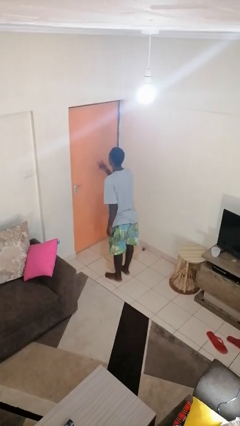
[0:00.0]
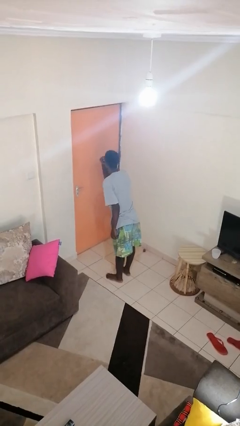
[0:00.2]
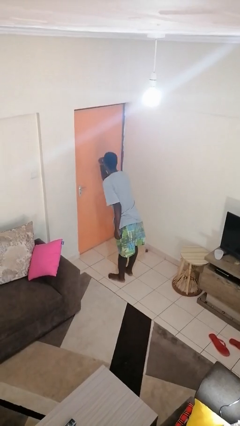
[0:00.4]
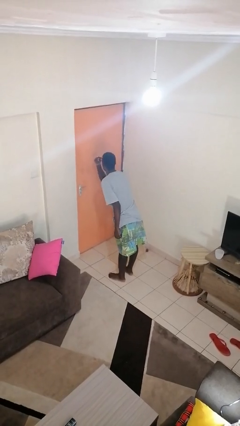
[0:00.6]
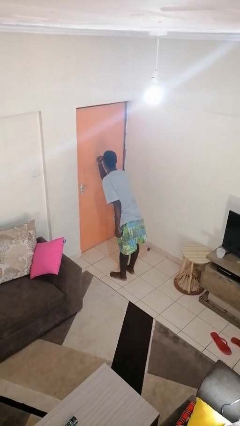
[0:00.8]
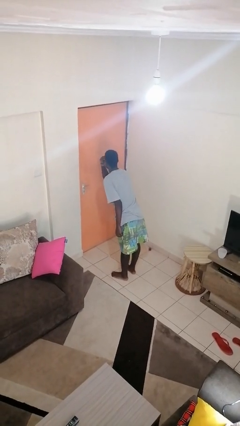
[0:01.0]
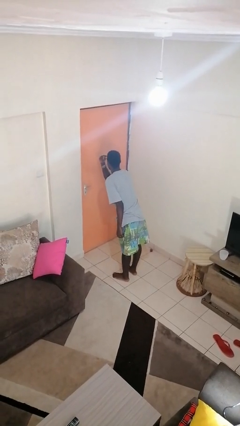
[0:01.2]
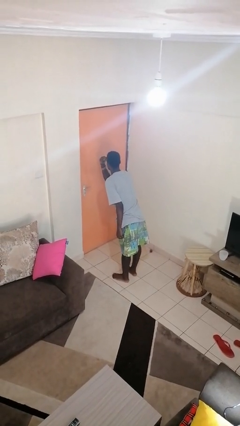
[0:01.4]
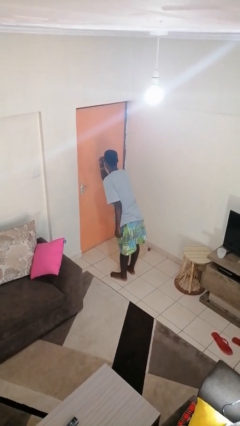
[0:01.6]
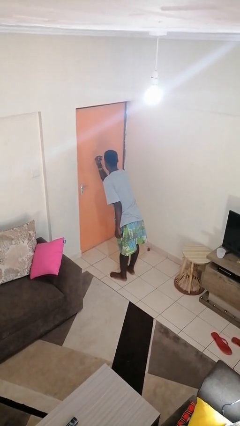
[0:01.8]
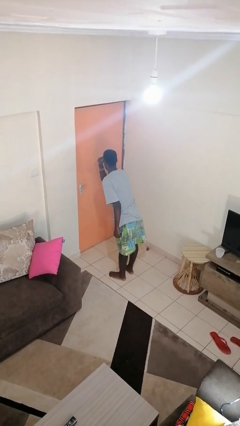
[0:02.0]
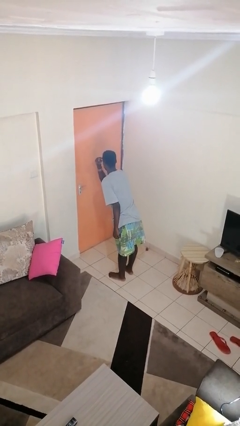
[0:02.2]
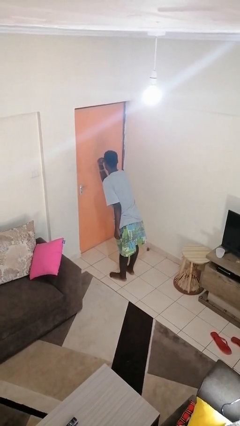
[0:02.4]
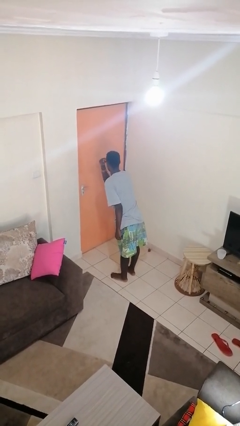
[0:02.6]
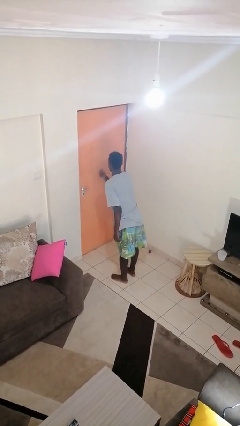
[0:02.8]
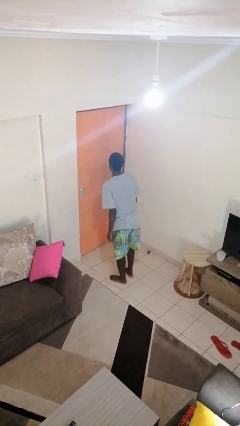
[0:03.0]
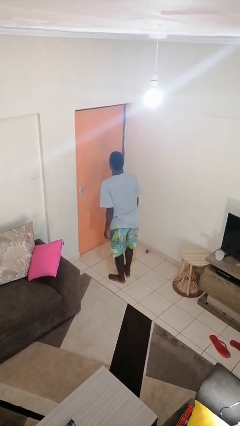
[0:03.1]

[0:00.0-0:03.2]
person gestures watch closely

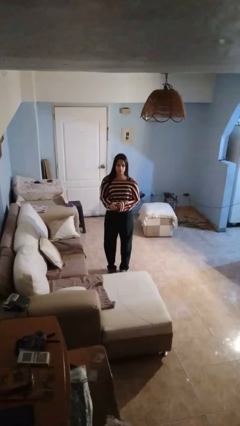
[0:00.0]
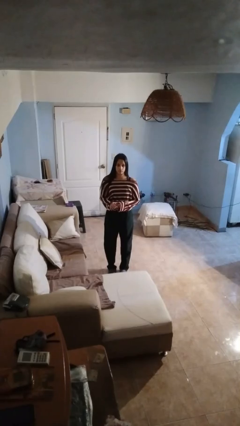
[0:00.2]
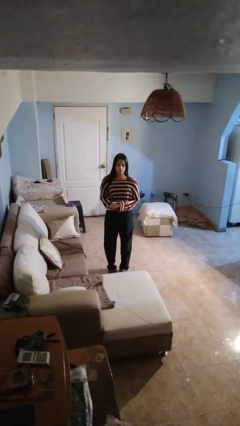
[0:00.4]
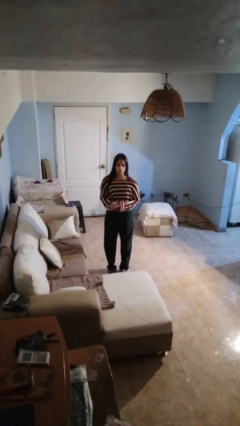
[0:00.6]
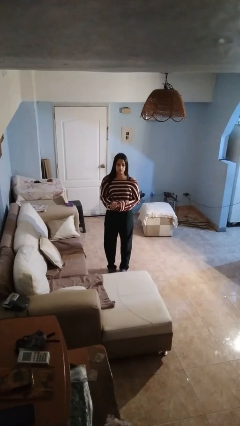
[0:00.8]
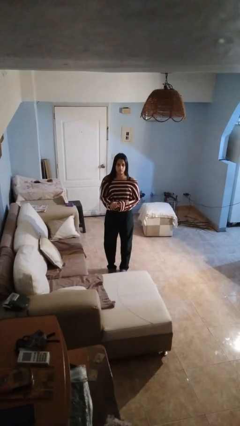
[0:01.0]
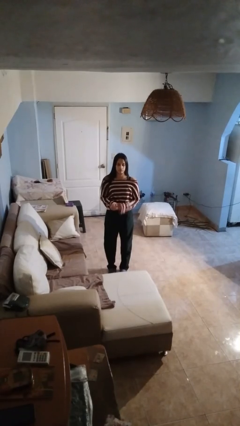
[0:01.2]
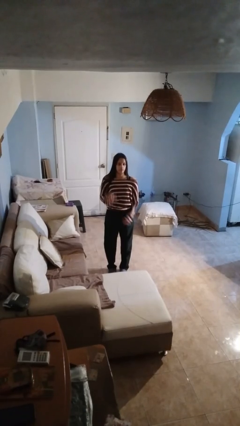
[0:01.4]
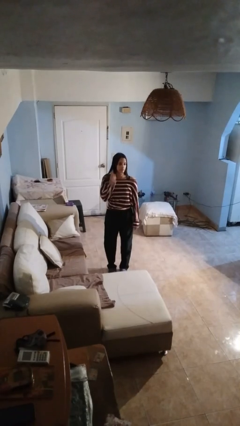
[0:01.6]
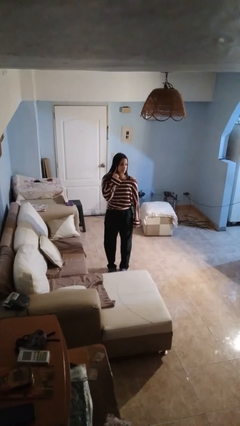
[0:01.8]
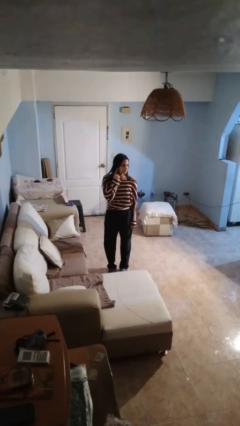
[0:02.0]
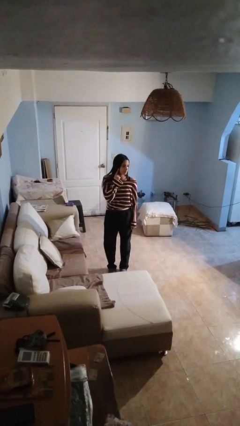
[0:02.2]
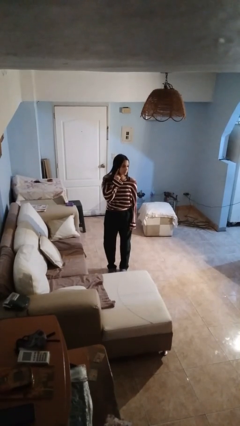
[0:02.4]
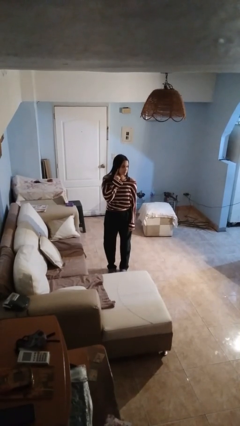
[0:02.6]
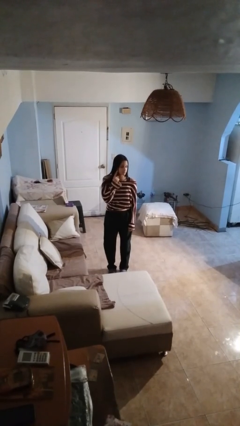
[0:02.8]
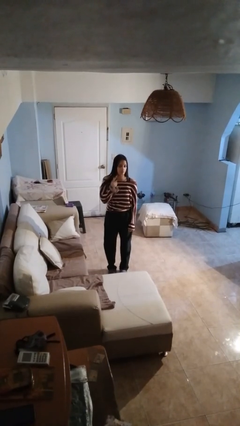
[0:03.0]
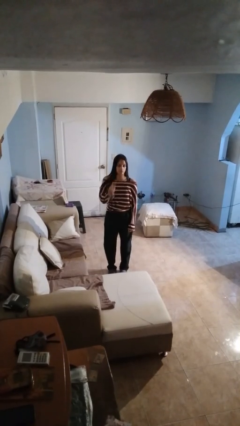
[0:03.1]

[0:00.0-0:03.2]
person gestures listen closely

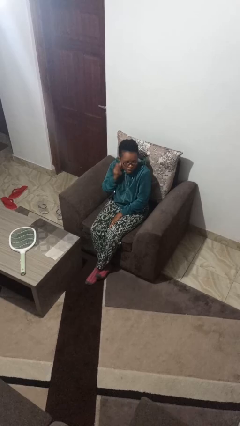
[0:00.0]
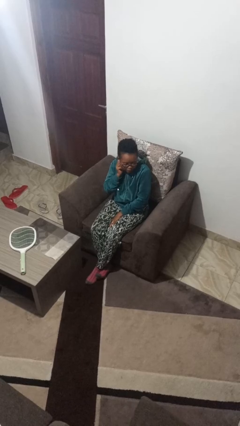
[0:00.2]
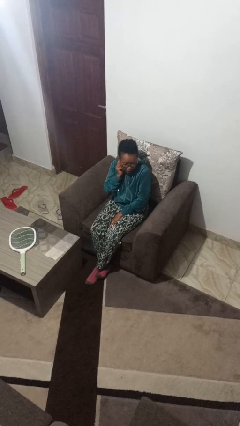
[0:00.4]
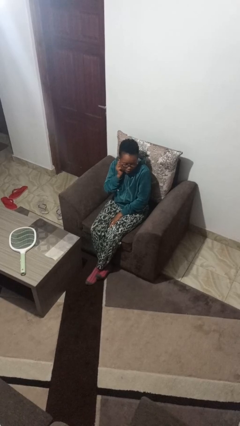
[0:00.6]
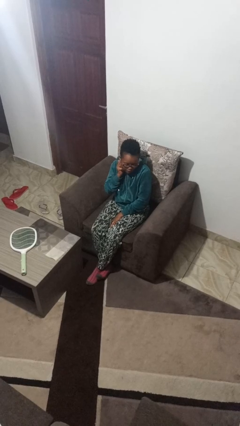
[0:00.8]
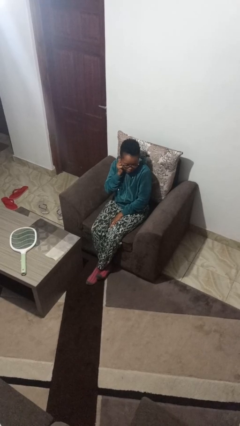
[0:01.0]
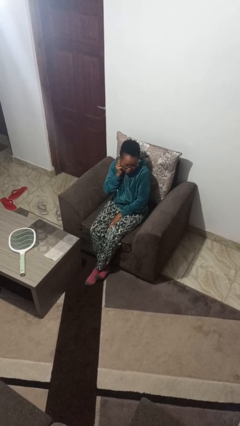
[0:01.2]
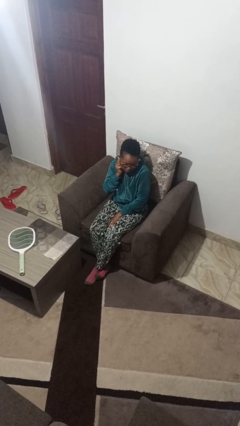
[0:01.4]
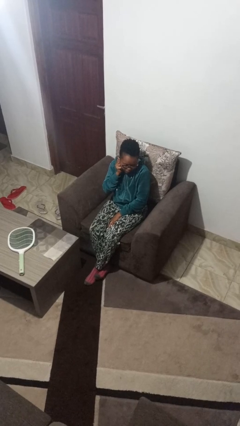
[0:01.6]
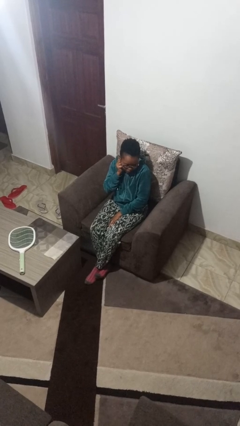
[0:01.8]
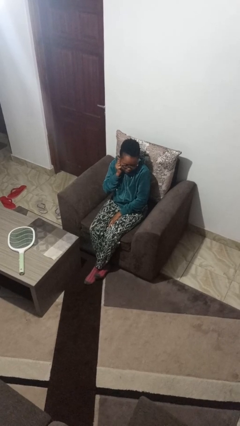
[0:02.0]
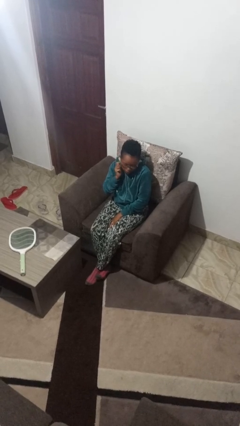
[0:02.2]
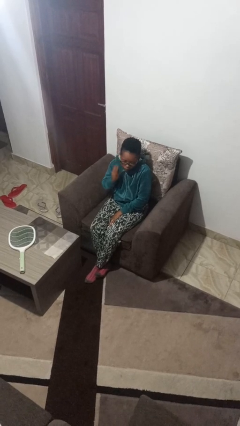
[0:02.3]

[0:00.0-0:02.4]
person touches earlobe

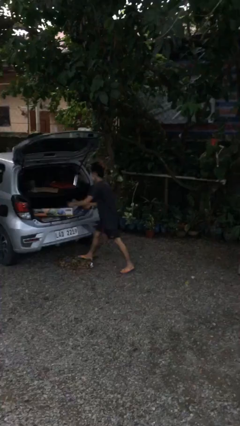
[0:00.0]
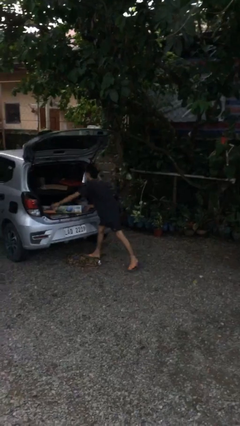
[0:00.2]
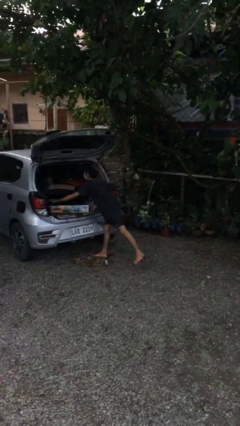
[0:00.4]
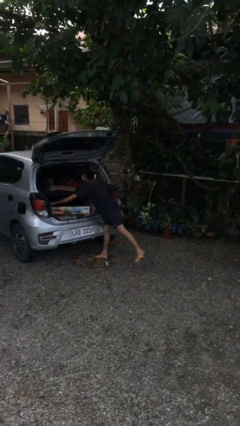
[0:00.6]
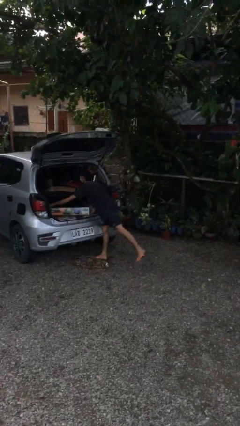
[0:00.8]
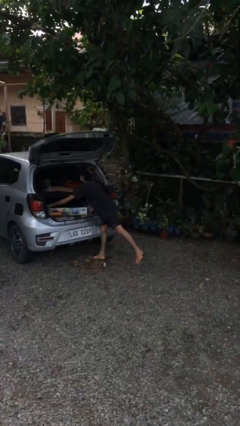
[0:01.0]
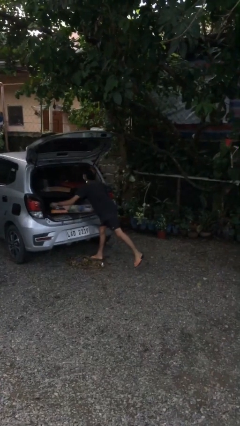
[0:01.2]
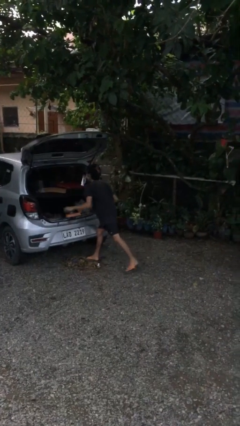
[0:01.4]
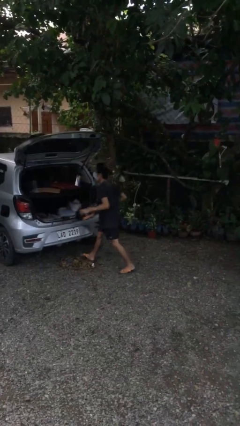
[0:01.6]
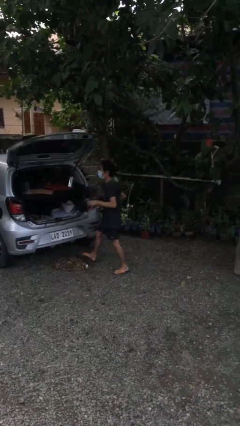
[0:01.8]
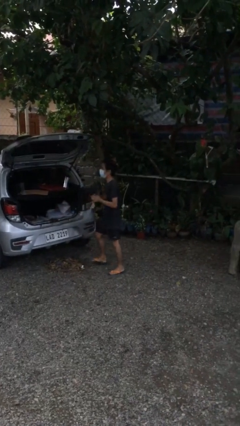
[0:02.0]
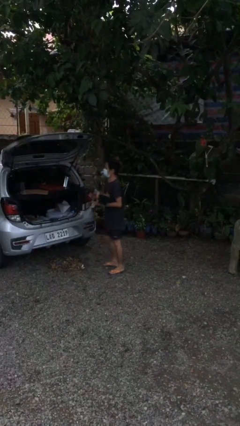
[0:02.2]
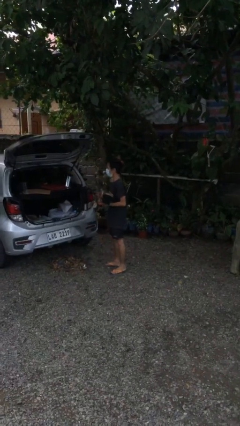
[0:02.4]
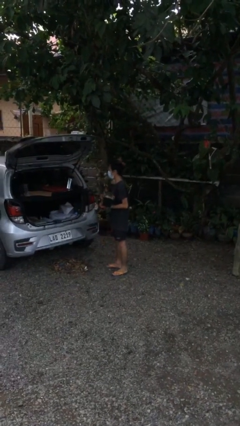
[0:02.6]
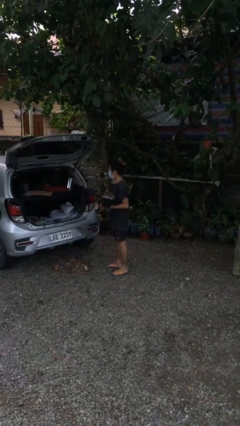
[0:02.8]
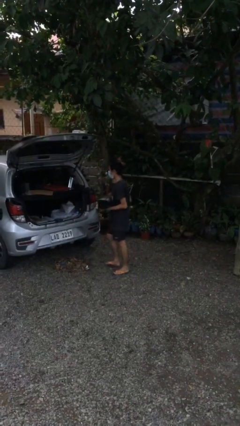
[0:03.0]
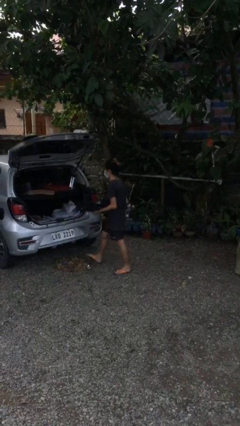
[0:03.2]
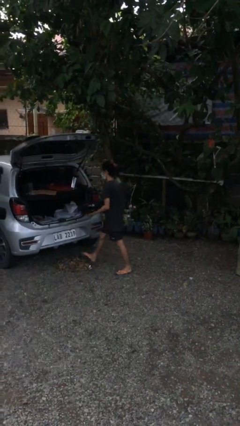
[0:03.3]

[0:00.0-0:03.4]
person unloads car

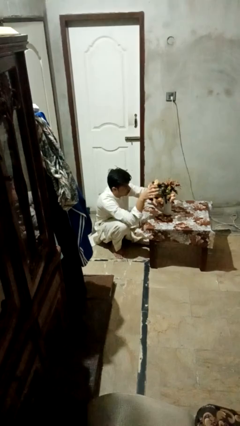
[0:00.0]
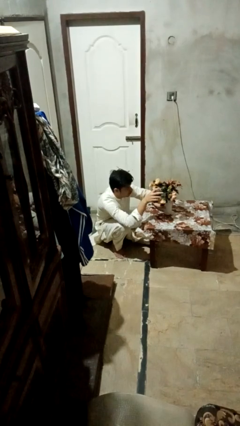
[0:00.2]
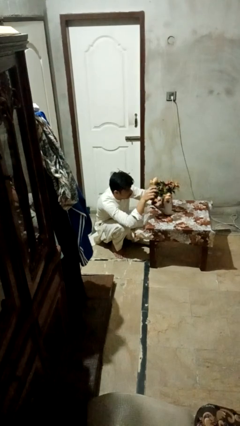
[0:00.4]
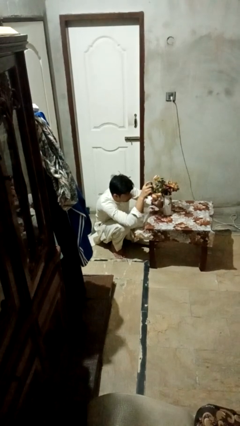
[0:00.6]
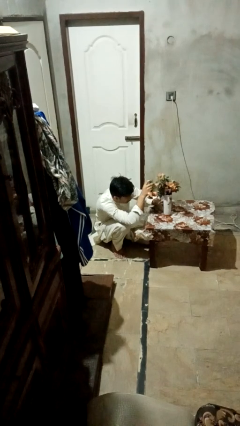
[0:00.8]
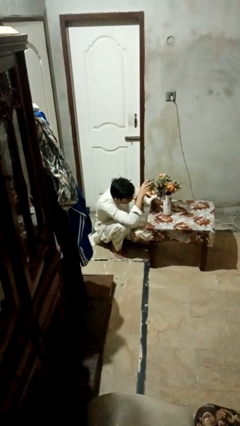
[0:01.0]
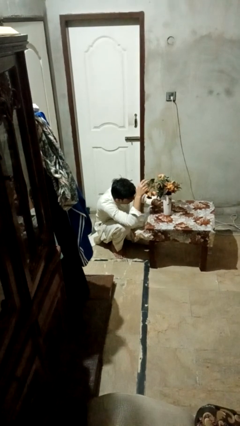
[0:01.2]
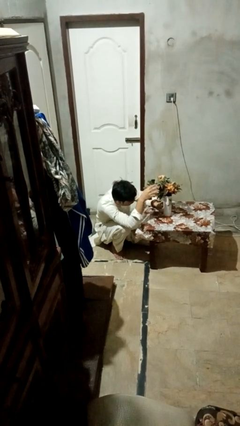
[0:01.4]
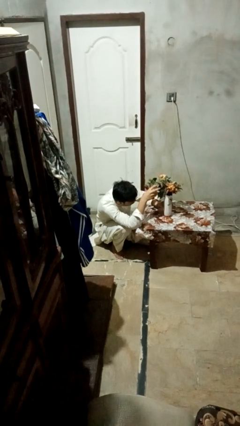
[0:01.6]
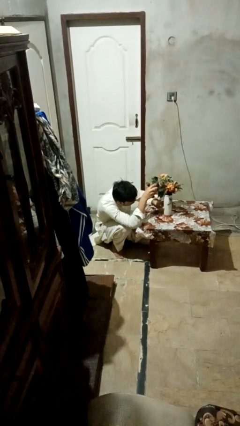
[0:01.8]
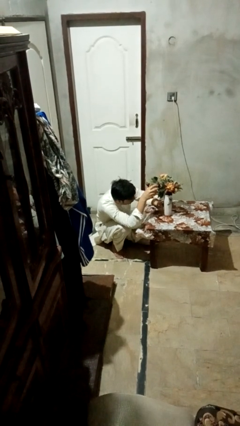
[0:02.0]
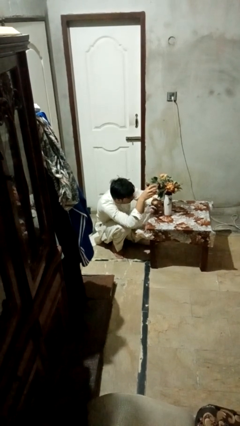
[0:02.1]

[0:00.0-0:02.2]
person arranges flowers in vase

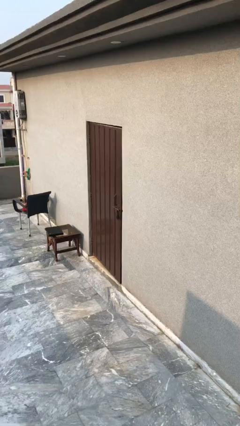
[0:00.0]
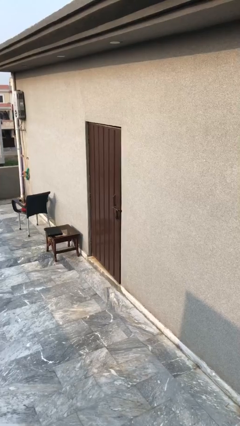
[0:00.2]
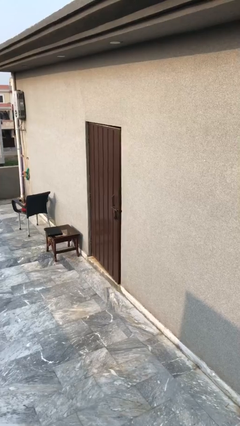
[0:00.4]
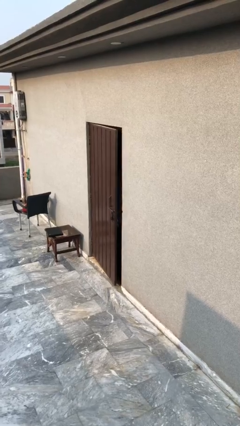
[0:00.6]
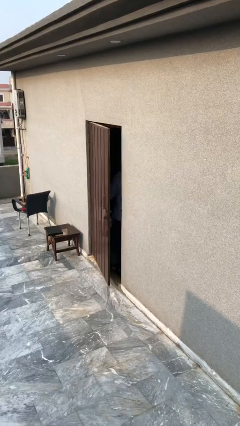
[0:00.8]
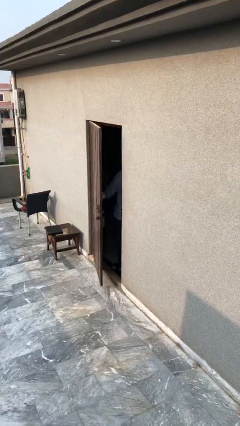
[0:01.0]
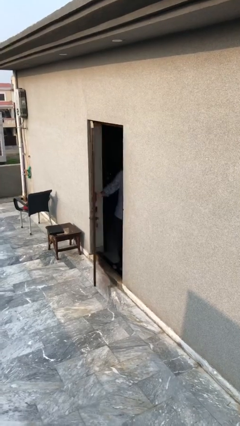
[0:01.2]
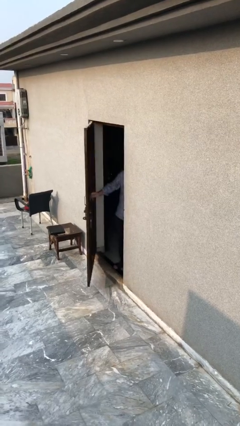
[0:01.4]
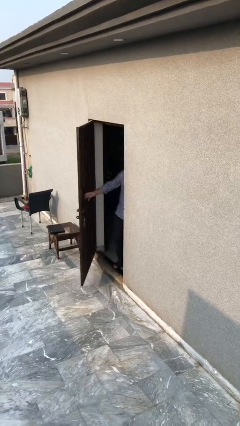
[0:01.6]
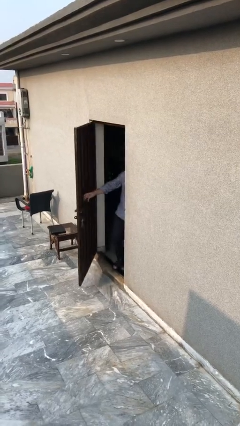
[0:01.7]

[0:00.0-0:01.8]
person opens facility door

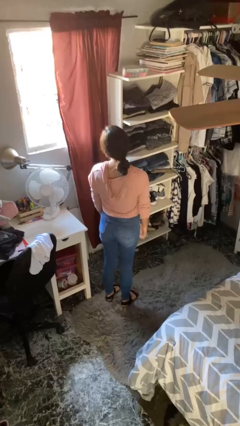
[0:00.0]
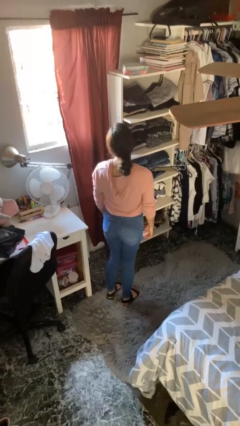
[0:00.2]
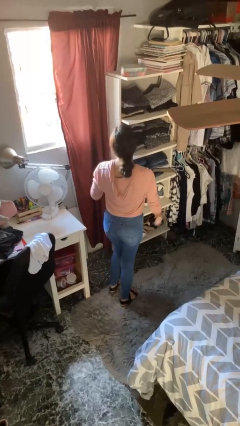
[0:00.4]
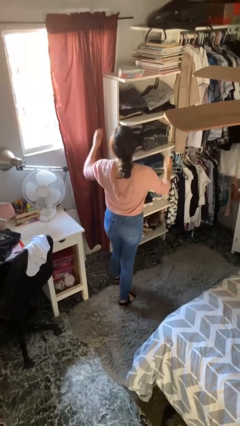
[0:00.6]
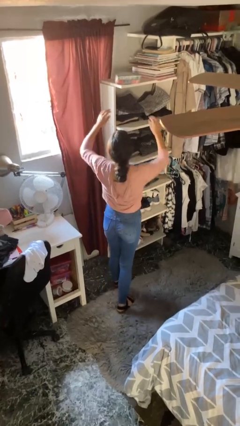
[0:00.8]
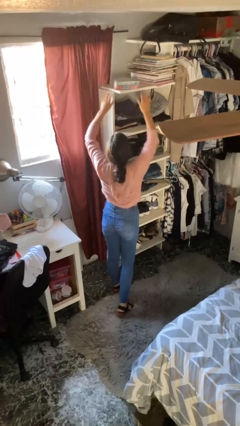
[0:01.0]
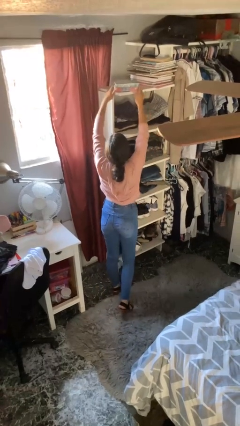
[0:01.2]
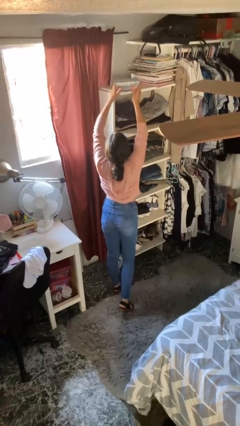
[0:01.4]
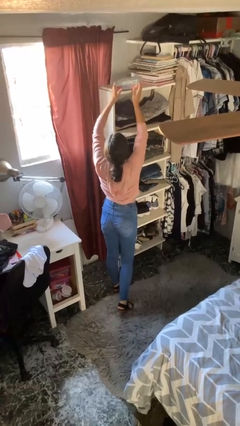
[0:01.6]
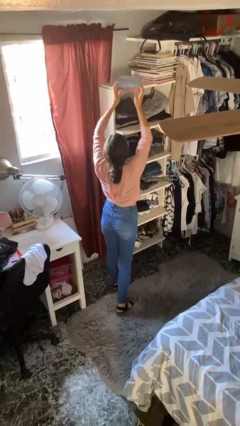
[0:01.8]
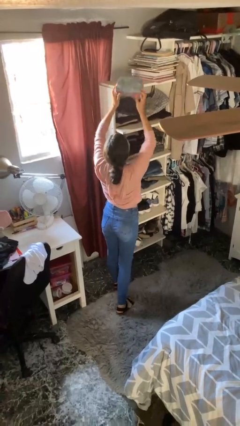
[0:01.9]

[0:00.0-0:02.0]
person picks up object from shelf
